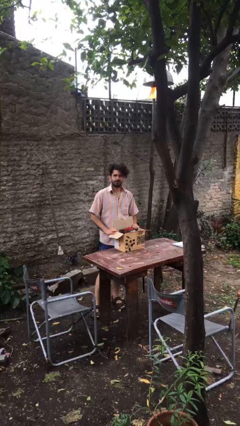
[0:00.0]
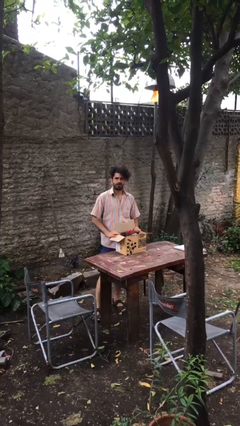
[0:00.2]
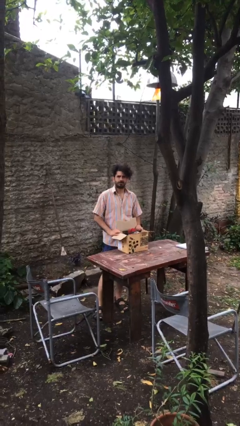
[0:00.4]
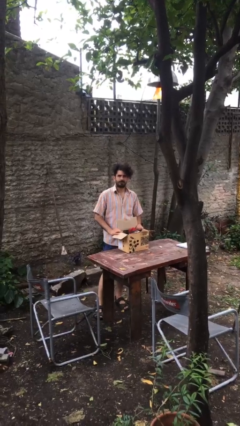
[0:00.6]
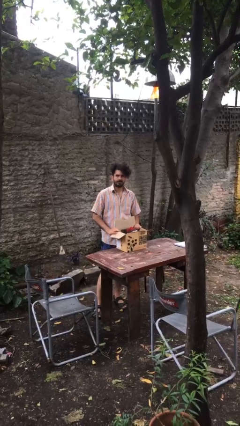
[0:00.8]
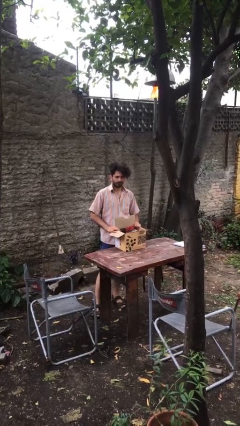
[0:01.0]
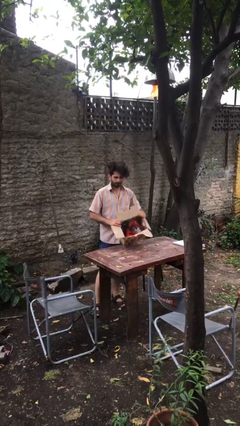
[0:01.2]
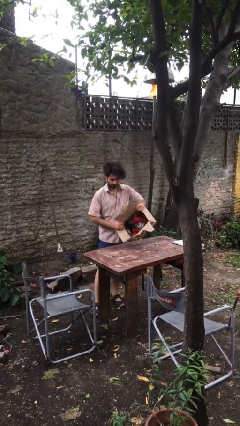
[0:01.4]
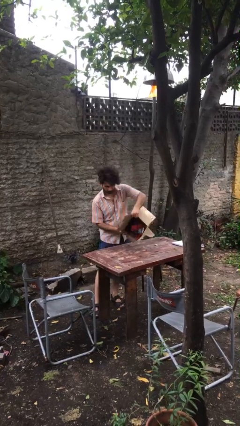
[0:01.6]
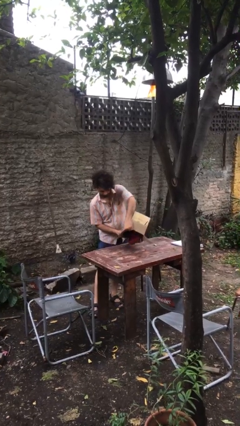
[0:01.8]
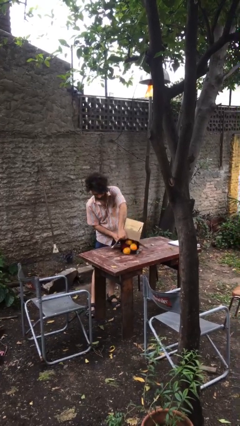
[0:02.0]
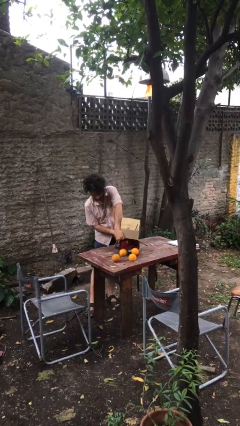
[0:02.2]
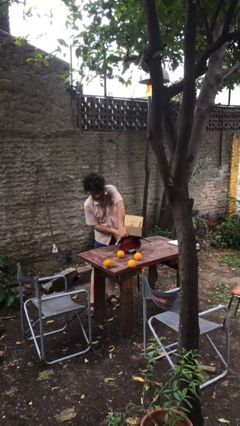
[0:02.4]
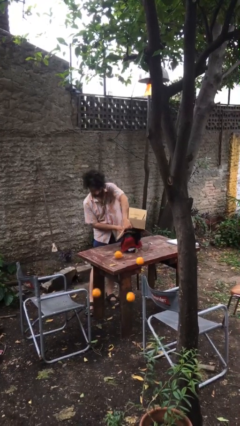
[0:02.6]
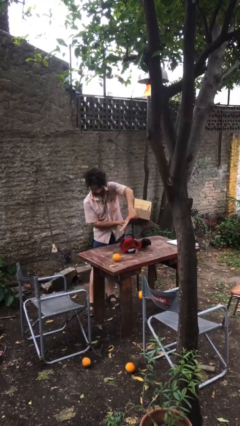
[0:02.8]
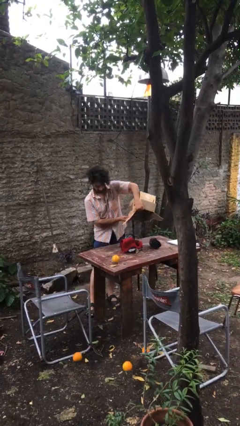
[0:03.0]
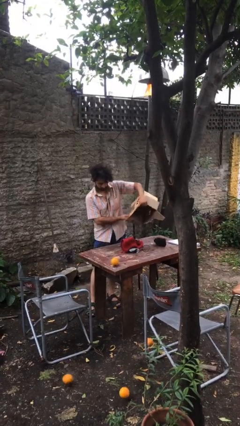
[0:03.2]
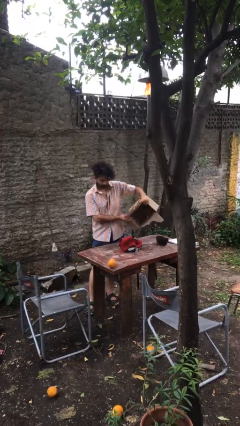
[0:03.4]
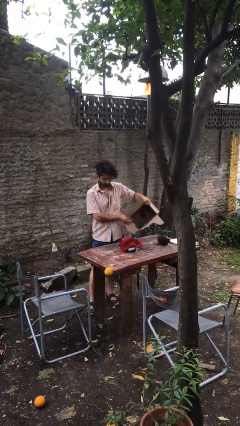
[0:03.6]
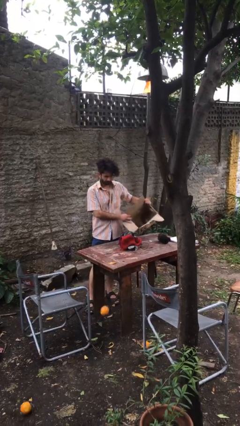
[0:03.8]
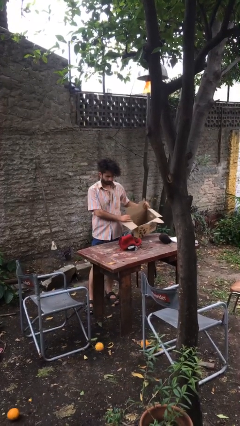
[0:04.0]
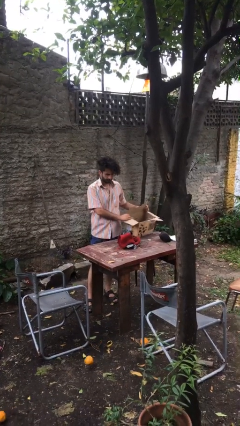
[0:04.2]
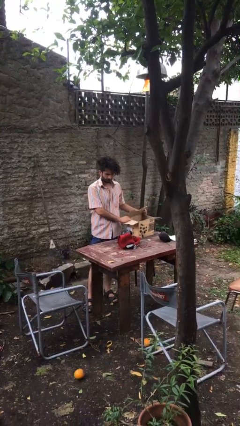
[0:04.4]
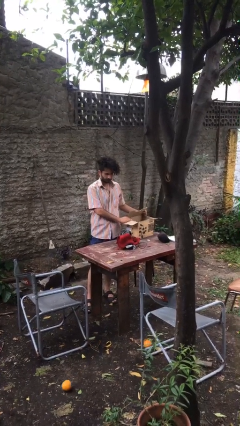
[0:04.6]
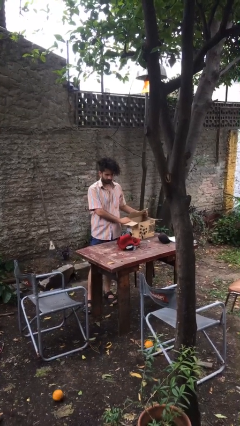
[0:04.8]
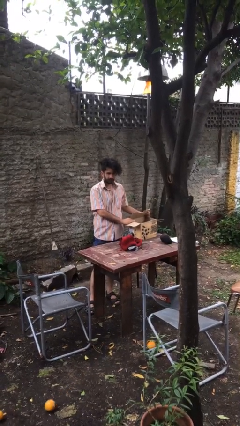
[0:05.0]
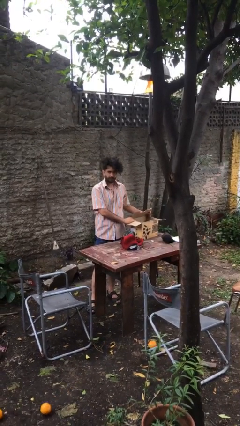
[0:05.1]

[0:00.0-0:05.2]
person unloads box onto table

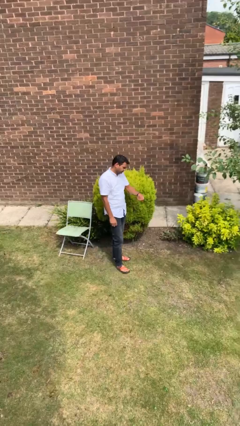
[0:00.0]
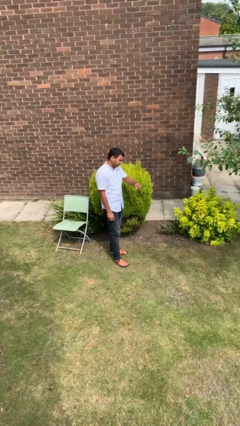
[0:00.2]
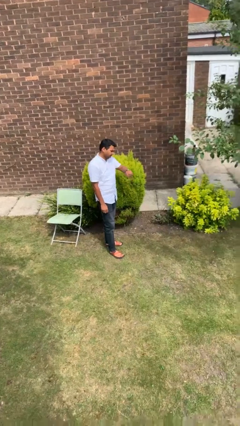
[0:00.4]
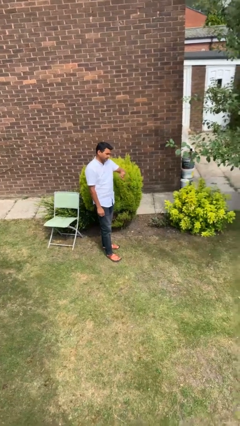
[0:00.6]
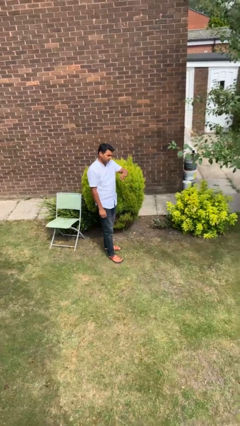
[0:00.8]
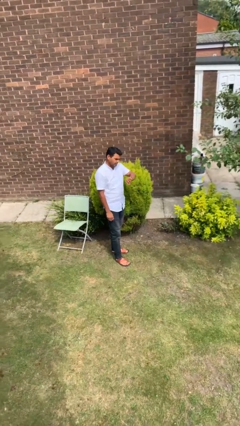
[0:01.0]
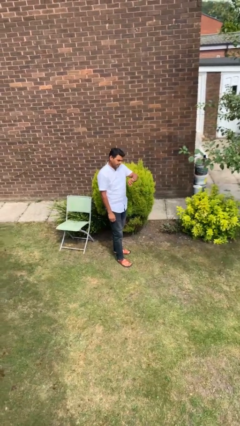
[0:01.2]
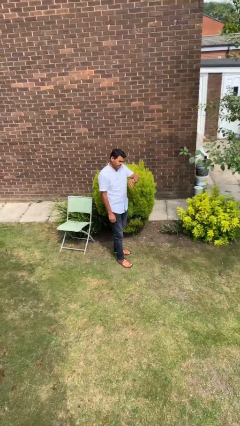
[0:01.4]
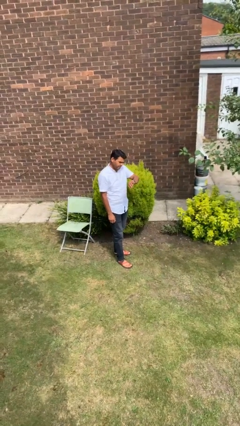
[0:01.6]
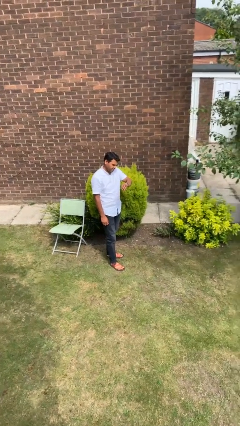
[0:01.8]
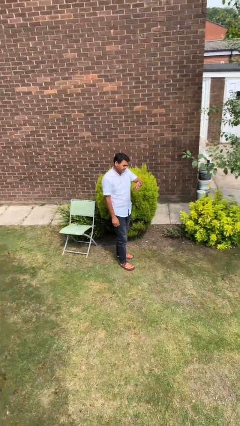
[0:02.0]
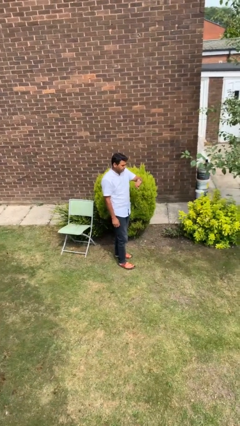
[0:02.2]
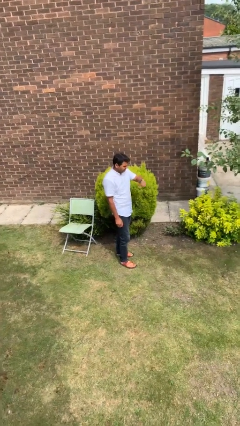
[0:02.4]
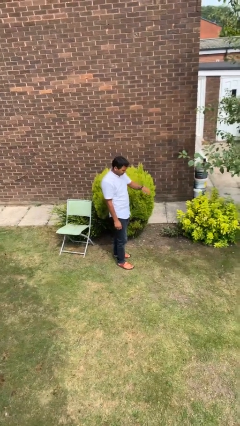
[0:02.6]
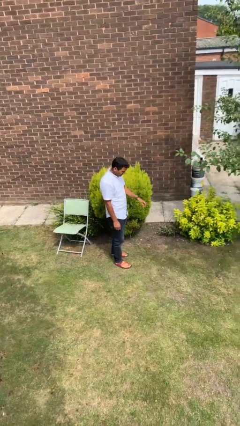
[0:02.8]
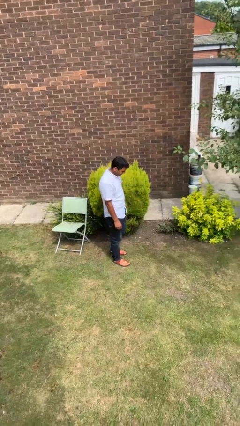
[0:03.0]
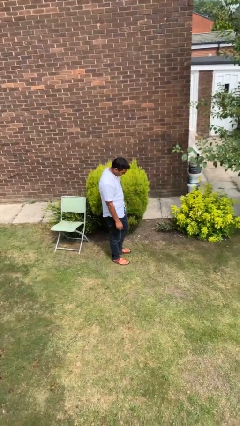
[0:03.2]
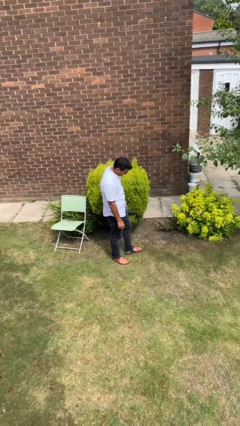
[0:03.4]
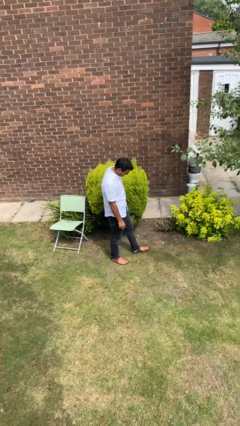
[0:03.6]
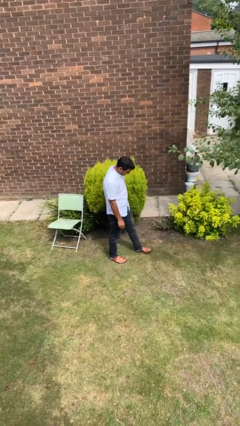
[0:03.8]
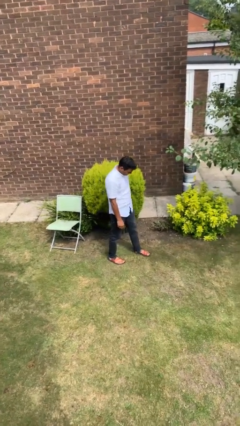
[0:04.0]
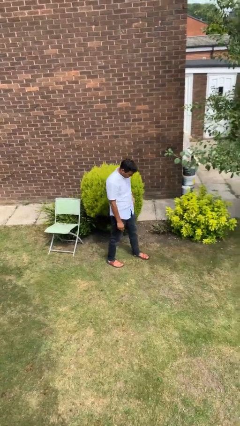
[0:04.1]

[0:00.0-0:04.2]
person looks at wristwatch

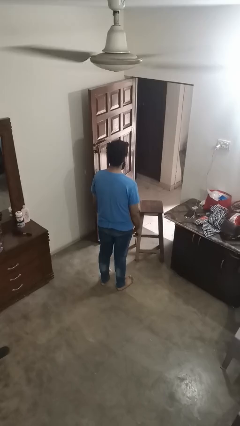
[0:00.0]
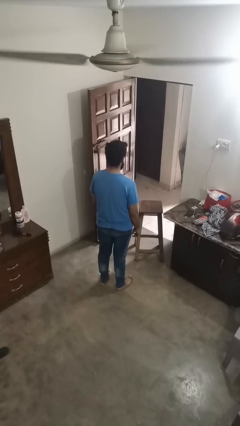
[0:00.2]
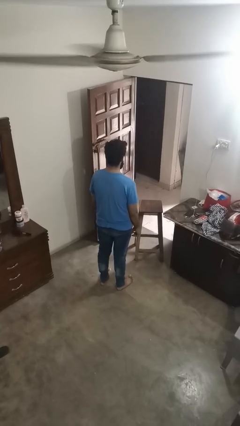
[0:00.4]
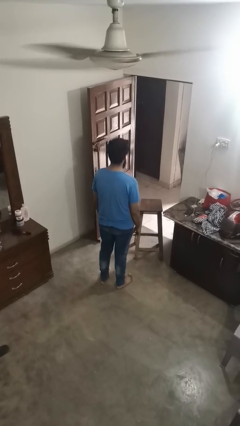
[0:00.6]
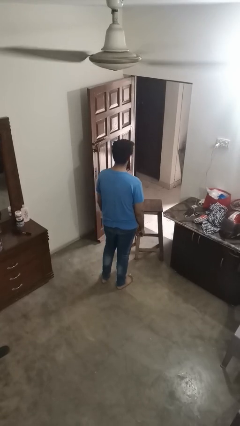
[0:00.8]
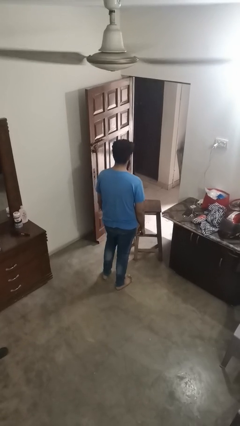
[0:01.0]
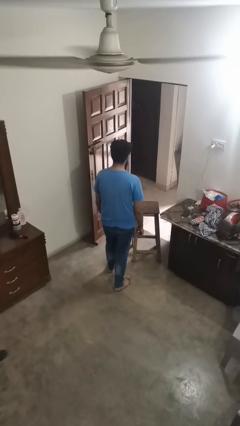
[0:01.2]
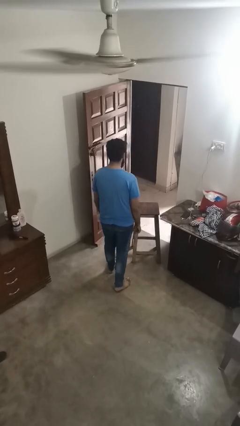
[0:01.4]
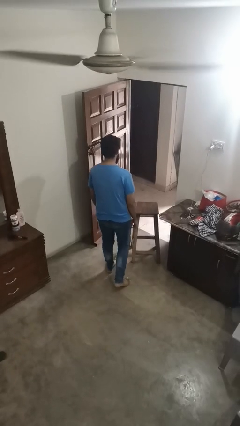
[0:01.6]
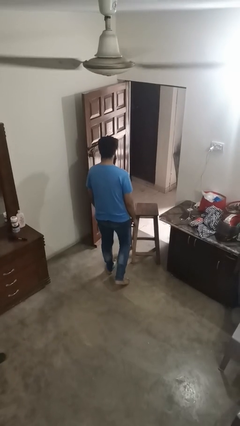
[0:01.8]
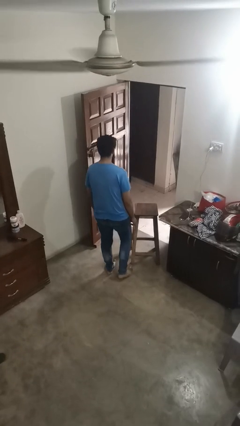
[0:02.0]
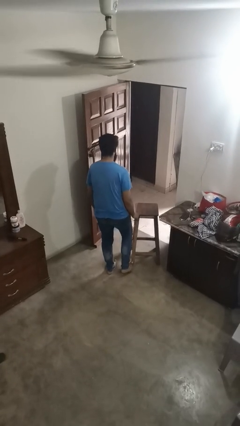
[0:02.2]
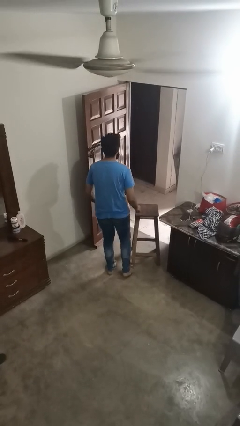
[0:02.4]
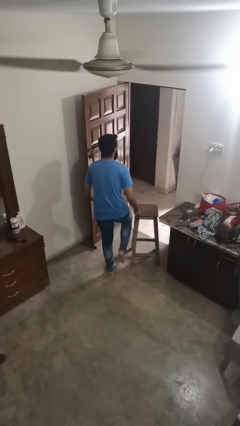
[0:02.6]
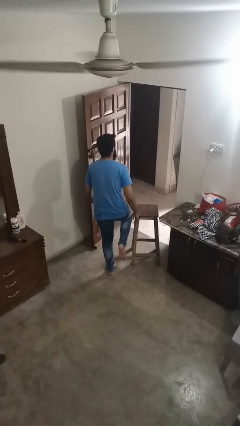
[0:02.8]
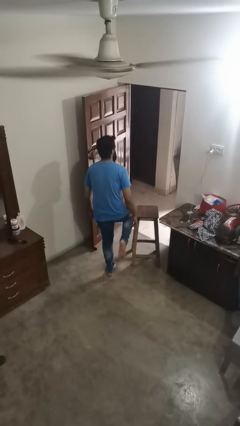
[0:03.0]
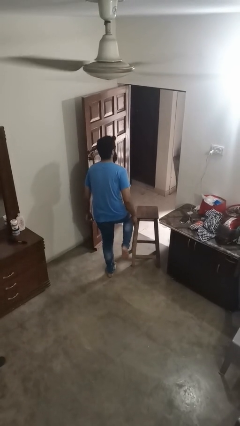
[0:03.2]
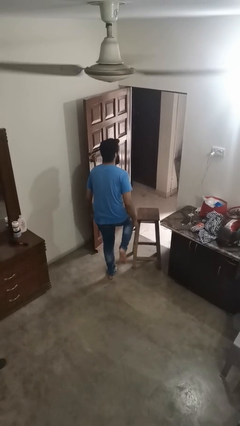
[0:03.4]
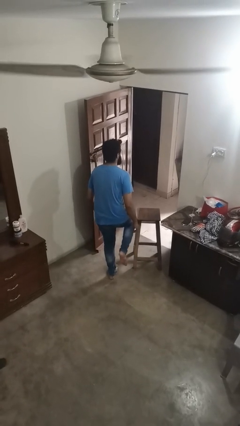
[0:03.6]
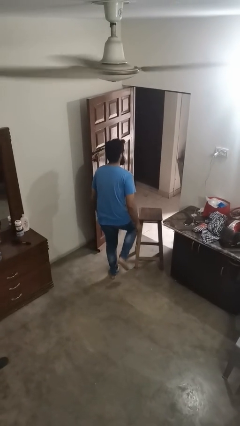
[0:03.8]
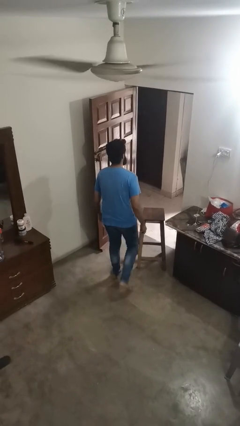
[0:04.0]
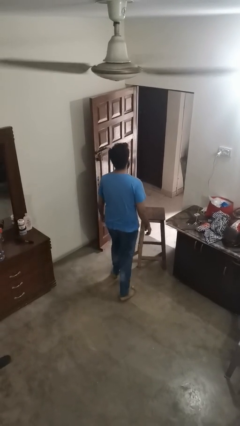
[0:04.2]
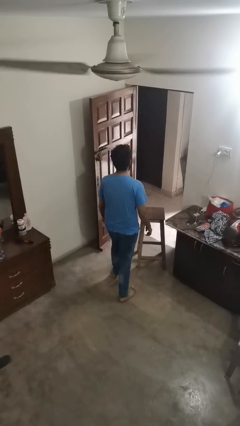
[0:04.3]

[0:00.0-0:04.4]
person stubs toe

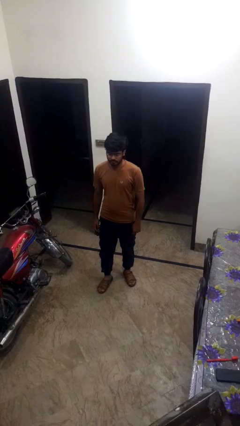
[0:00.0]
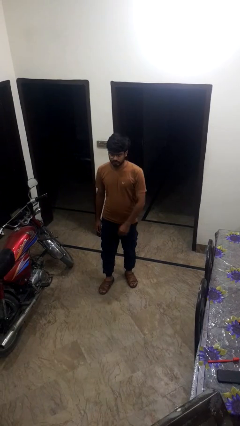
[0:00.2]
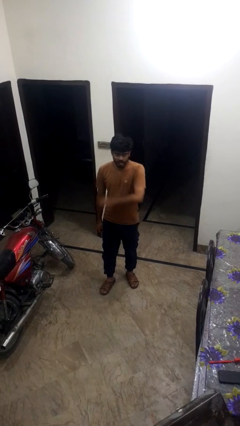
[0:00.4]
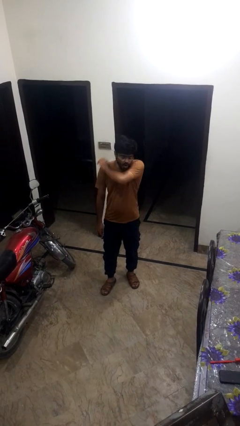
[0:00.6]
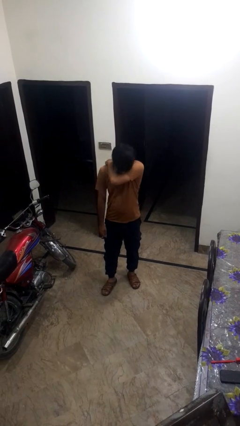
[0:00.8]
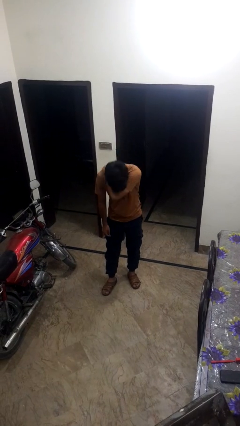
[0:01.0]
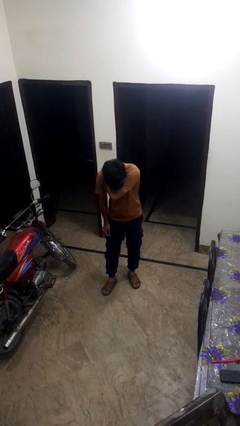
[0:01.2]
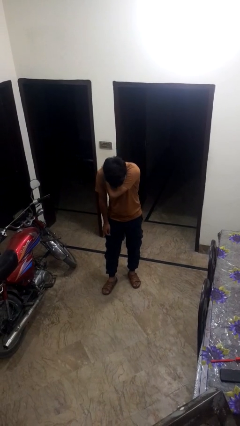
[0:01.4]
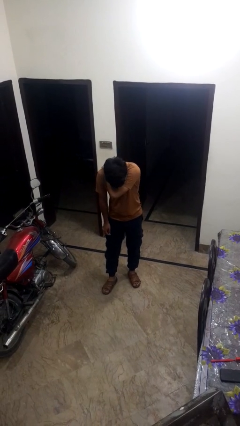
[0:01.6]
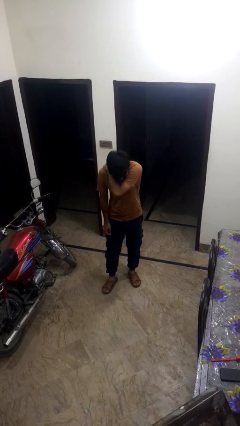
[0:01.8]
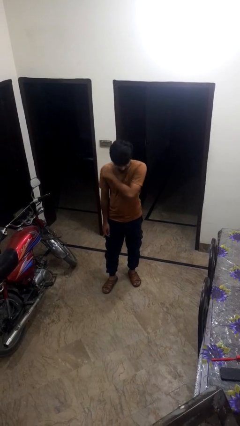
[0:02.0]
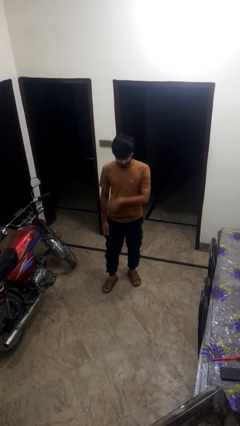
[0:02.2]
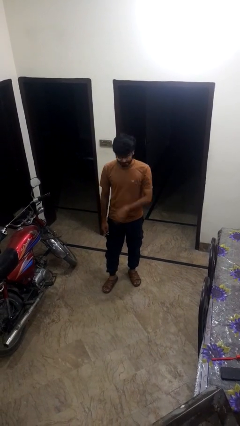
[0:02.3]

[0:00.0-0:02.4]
person sneezes into arm

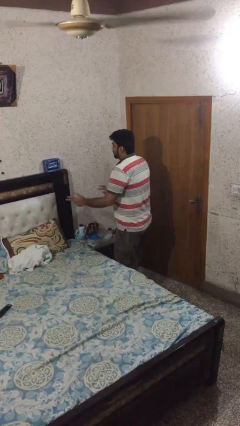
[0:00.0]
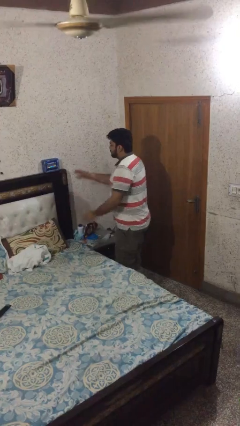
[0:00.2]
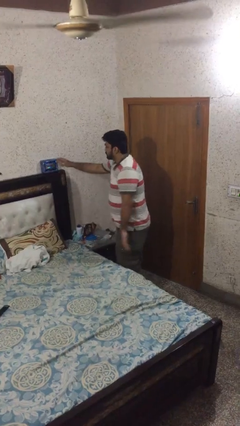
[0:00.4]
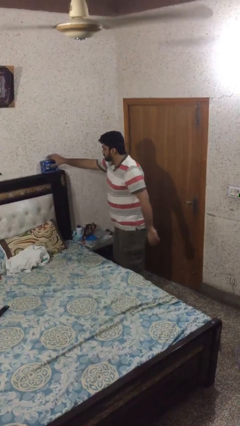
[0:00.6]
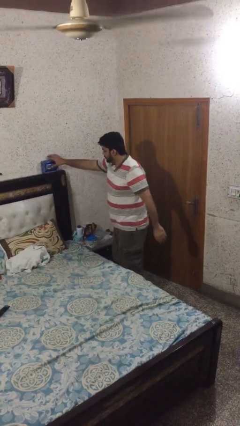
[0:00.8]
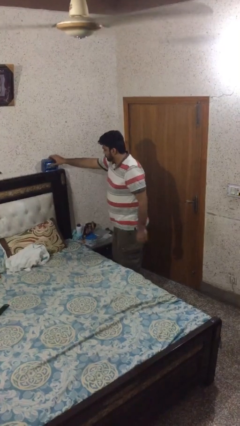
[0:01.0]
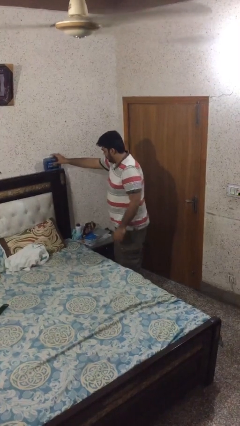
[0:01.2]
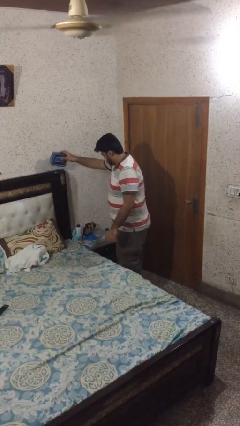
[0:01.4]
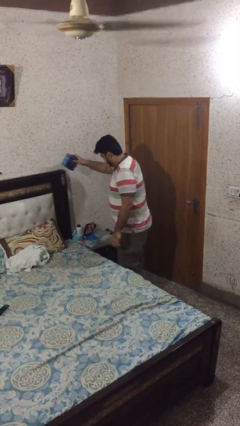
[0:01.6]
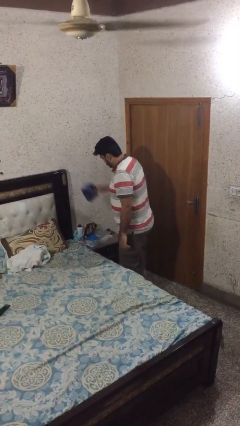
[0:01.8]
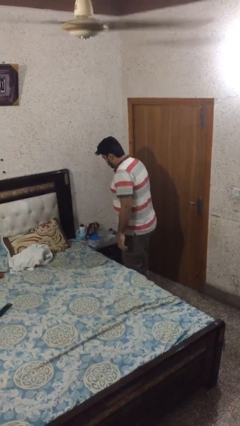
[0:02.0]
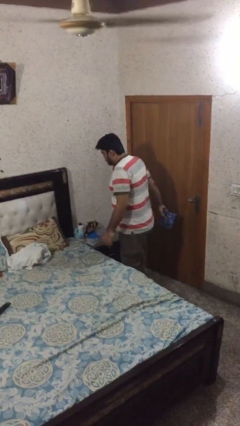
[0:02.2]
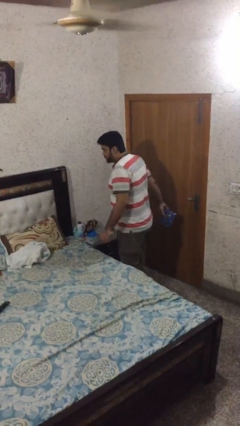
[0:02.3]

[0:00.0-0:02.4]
person picks up object from shelf
